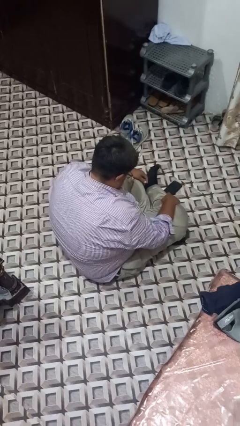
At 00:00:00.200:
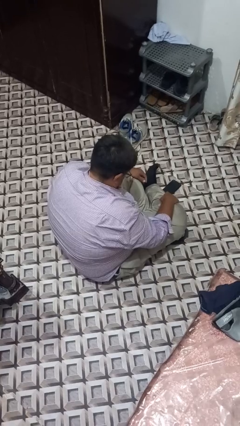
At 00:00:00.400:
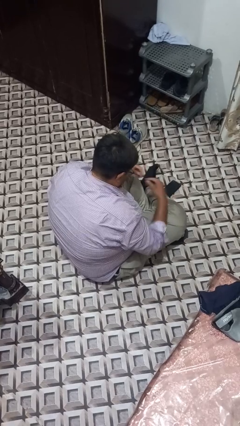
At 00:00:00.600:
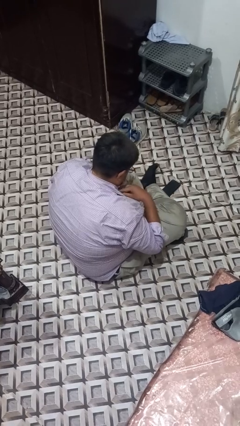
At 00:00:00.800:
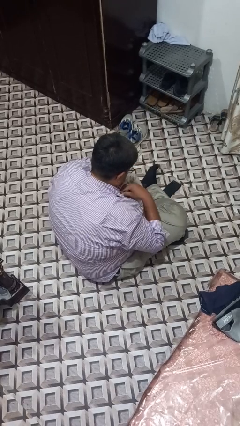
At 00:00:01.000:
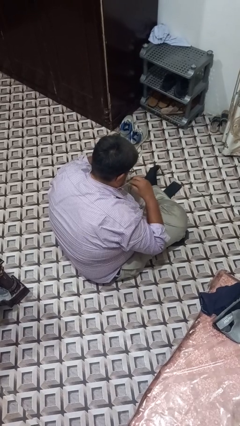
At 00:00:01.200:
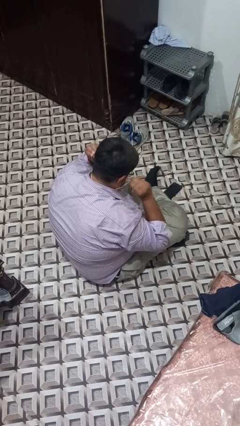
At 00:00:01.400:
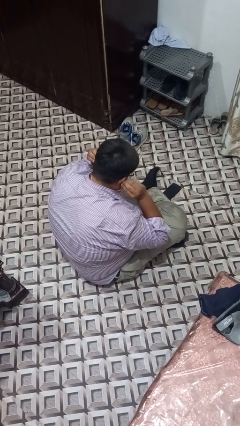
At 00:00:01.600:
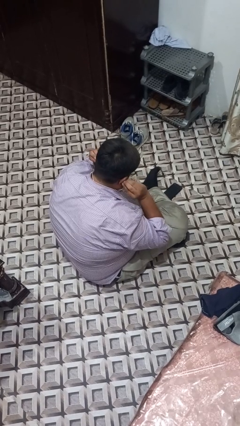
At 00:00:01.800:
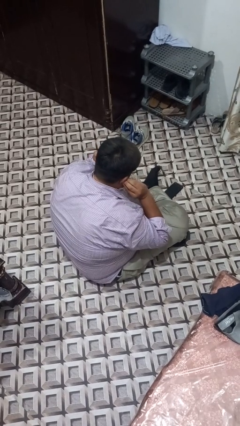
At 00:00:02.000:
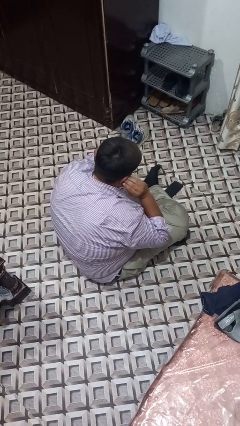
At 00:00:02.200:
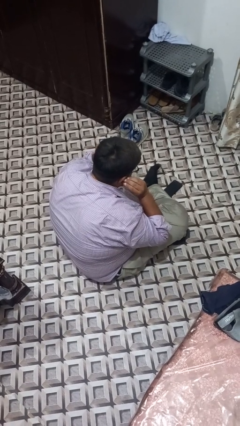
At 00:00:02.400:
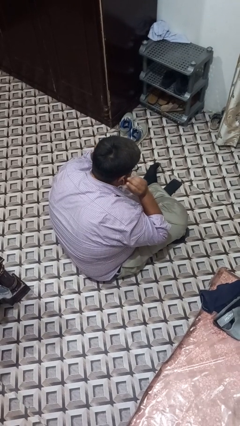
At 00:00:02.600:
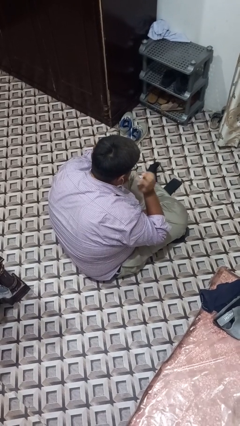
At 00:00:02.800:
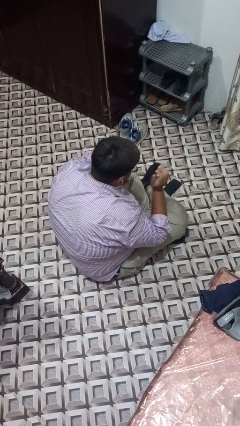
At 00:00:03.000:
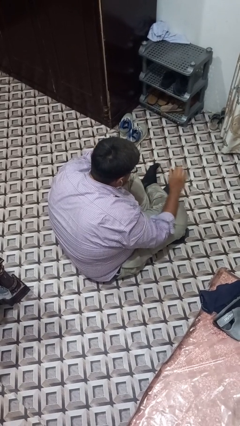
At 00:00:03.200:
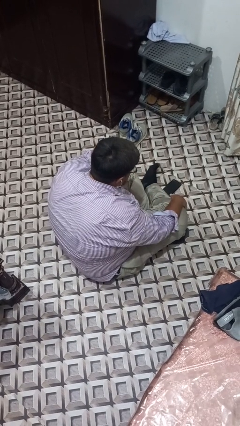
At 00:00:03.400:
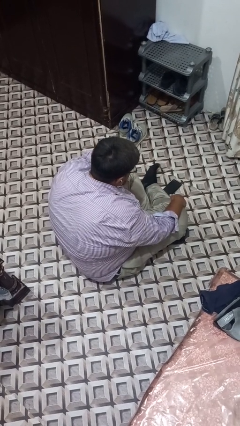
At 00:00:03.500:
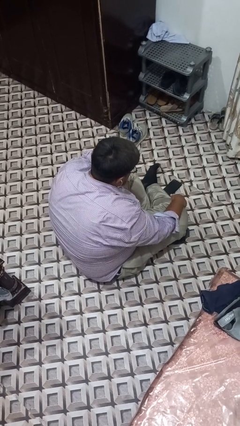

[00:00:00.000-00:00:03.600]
person puts on headphones

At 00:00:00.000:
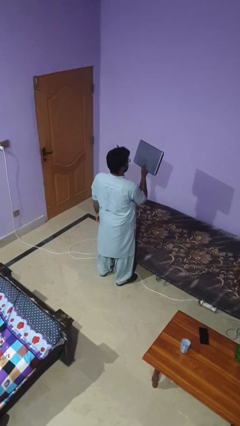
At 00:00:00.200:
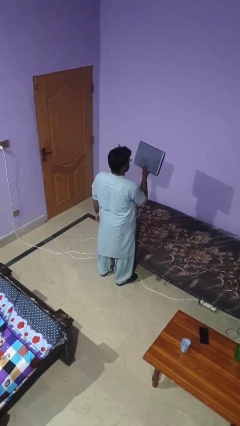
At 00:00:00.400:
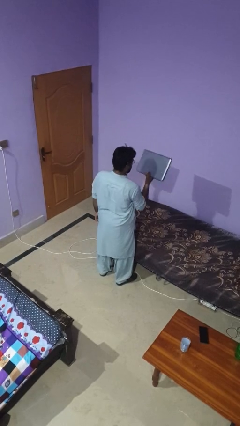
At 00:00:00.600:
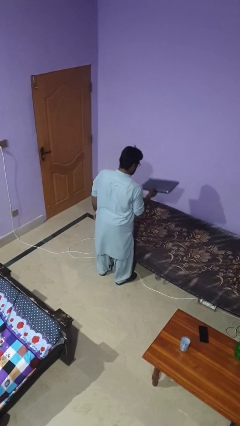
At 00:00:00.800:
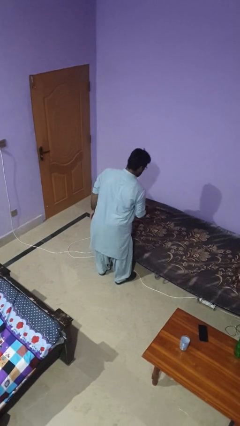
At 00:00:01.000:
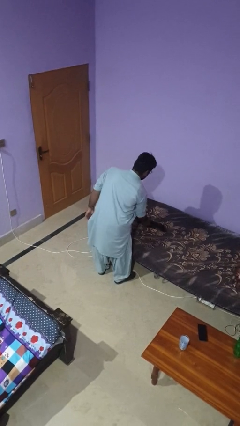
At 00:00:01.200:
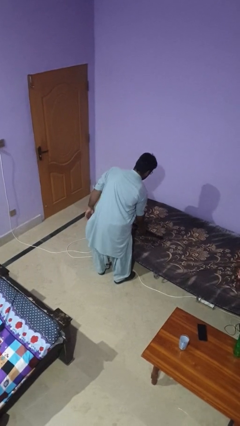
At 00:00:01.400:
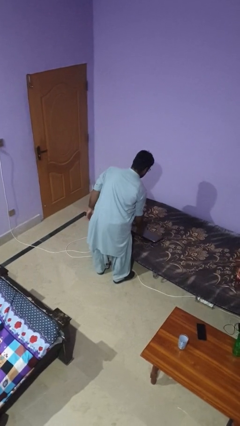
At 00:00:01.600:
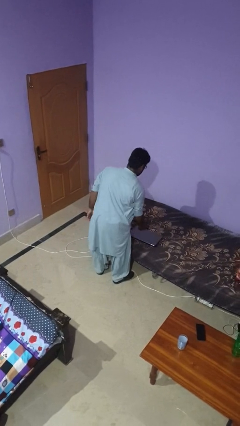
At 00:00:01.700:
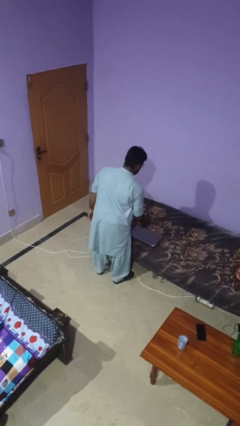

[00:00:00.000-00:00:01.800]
person puts down object on bed

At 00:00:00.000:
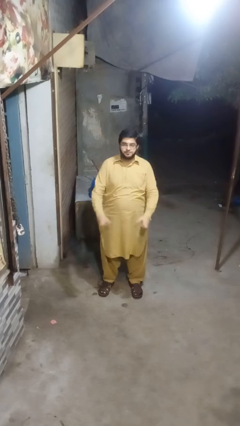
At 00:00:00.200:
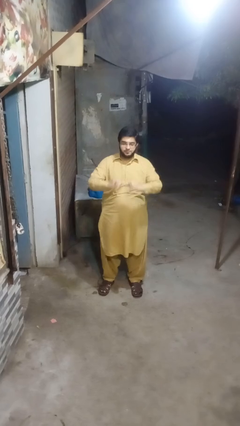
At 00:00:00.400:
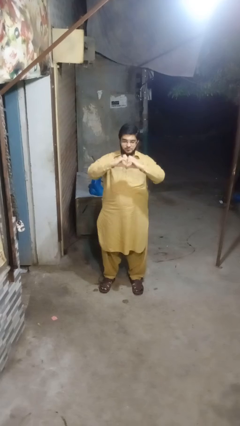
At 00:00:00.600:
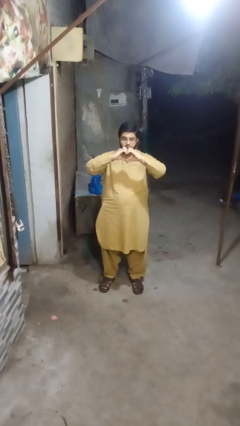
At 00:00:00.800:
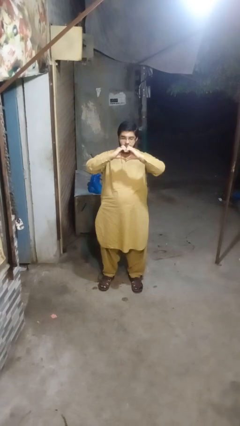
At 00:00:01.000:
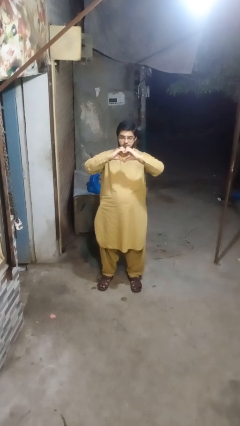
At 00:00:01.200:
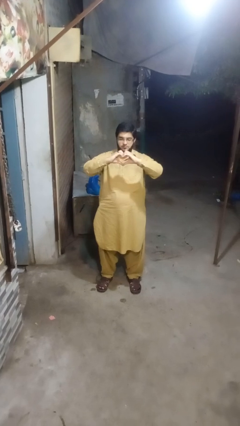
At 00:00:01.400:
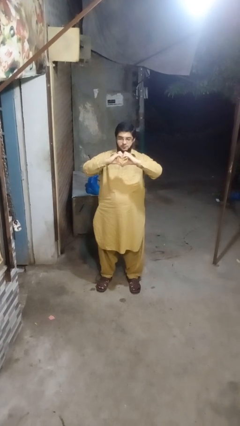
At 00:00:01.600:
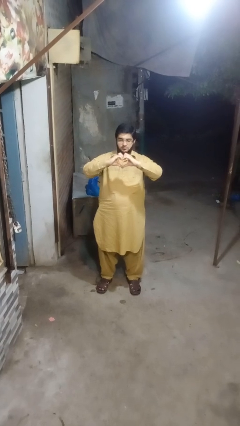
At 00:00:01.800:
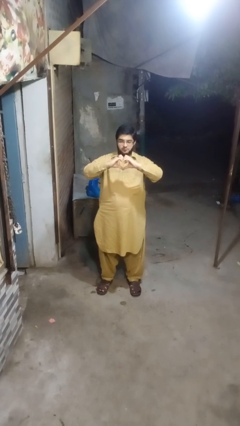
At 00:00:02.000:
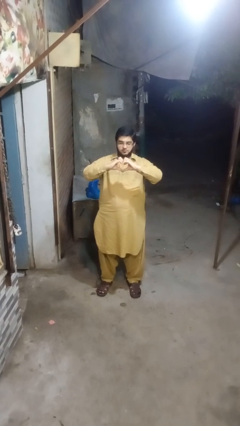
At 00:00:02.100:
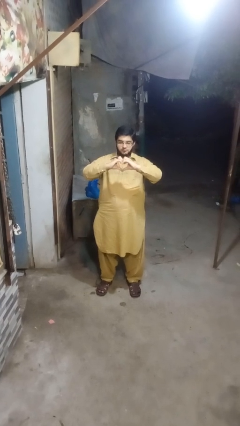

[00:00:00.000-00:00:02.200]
person gestures heart

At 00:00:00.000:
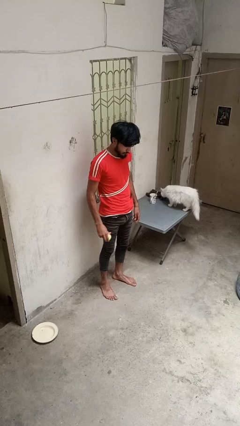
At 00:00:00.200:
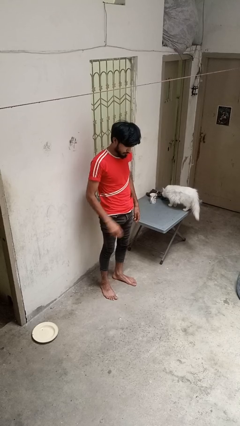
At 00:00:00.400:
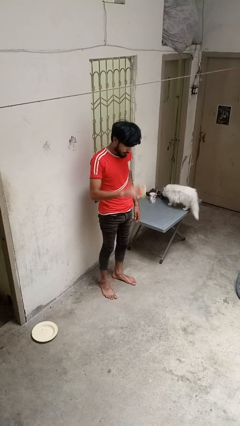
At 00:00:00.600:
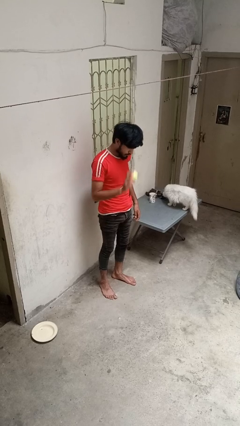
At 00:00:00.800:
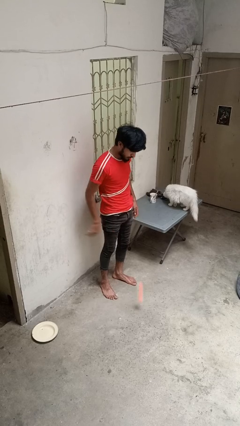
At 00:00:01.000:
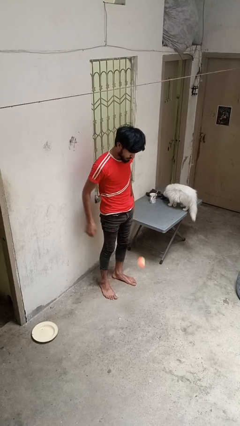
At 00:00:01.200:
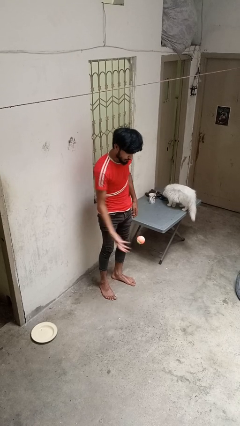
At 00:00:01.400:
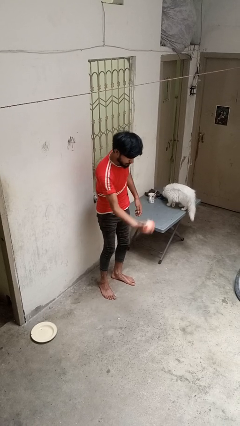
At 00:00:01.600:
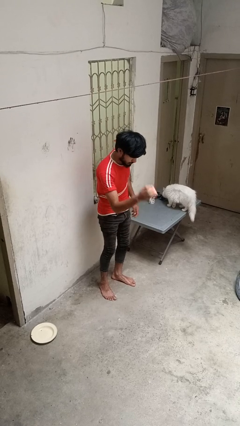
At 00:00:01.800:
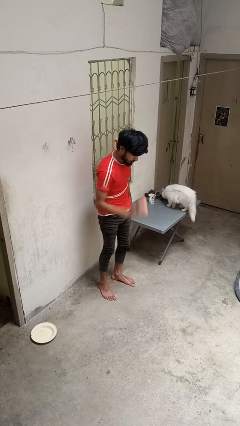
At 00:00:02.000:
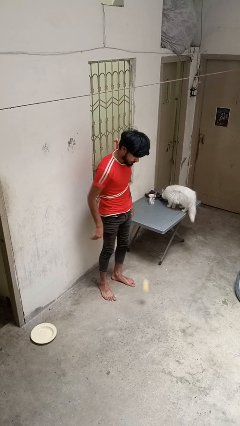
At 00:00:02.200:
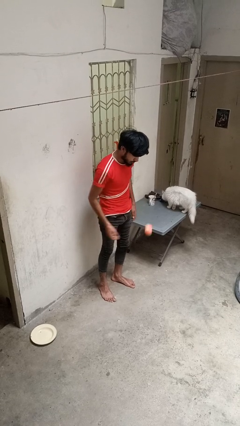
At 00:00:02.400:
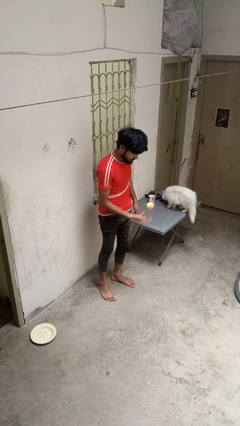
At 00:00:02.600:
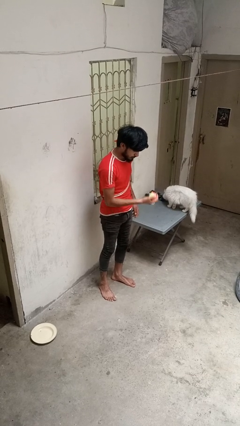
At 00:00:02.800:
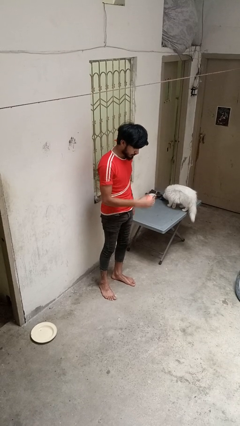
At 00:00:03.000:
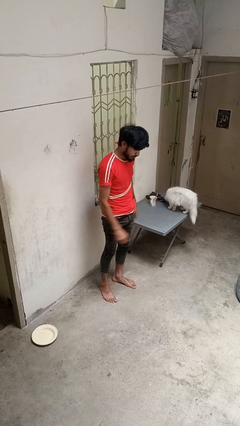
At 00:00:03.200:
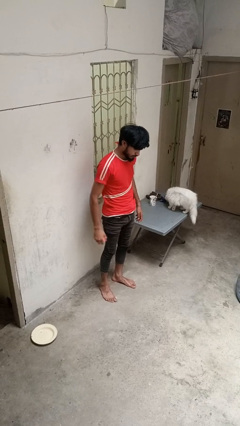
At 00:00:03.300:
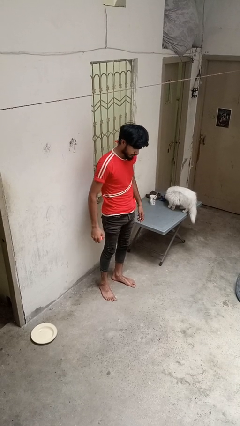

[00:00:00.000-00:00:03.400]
person bounces ball on floor

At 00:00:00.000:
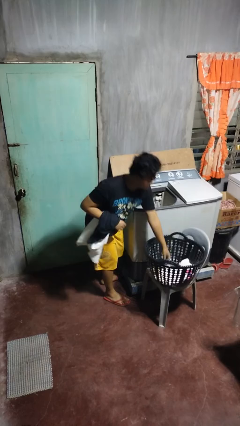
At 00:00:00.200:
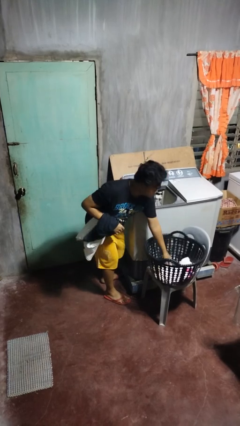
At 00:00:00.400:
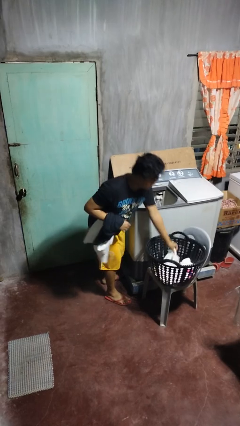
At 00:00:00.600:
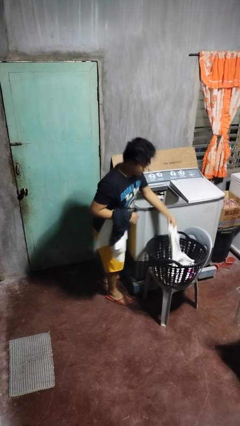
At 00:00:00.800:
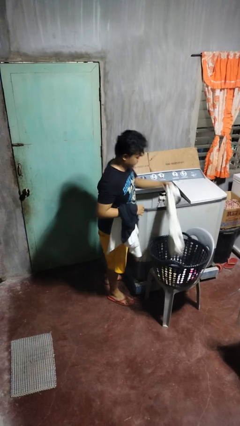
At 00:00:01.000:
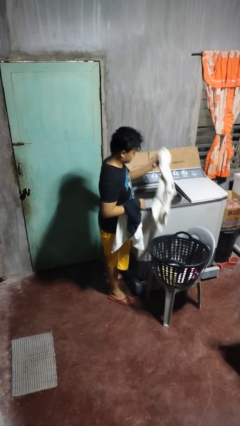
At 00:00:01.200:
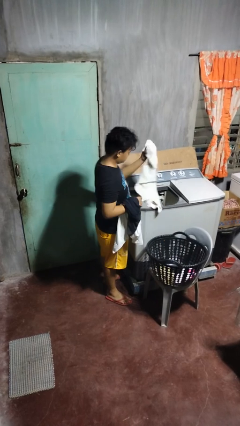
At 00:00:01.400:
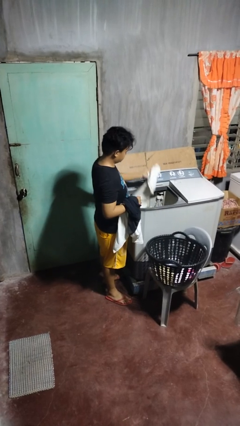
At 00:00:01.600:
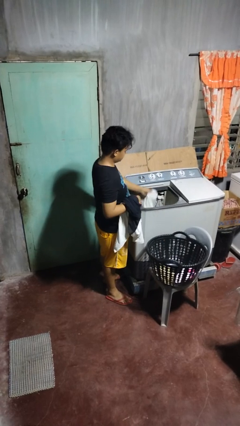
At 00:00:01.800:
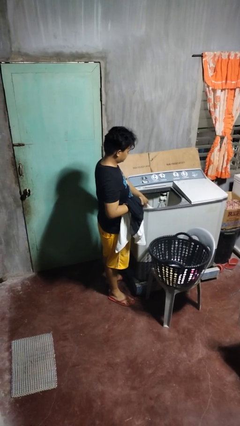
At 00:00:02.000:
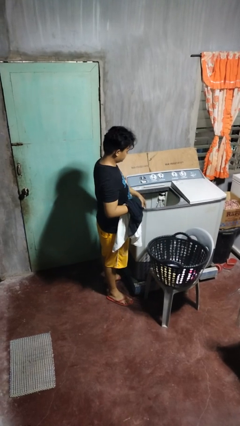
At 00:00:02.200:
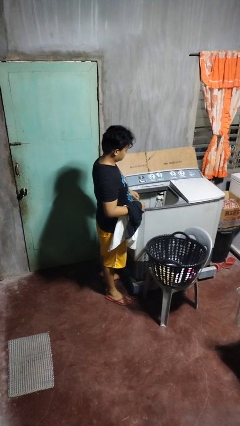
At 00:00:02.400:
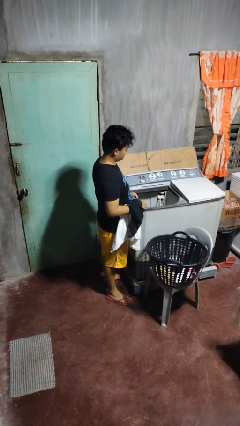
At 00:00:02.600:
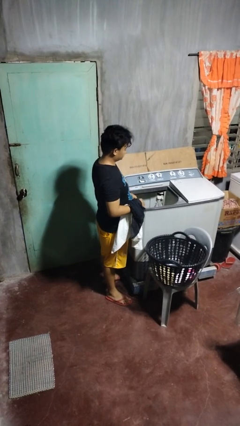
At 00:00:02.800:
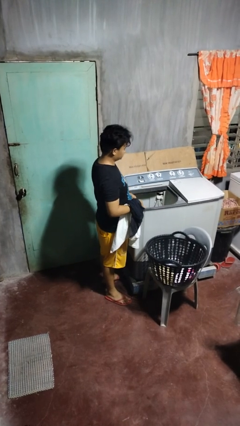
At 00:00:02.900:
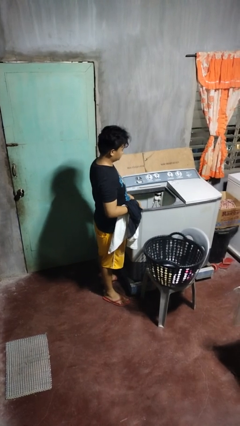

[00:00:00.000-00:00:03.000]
person loads clotheswasher

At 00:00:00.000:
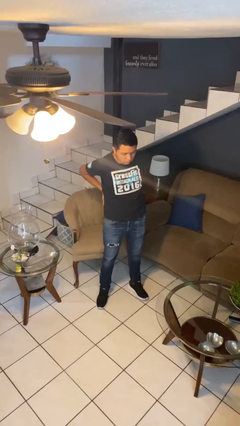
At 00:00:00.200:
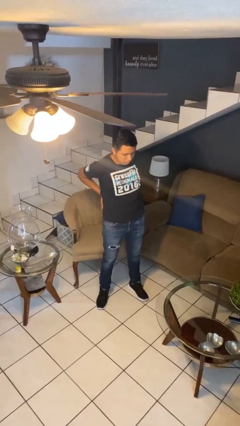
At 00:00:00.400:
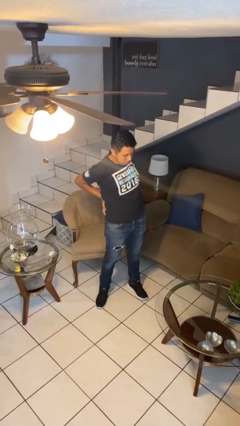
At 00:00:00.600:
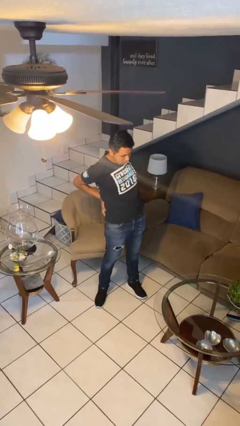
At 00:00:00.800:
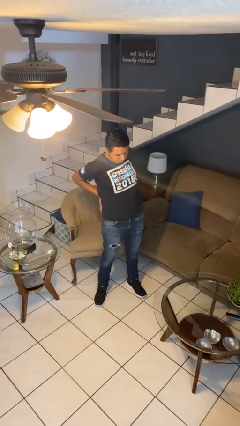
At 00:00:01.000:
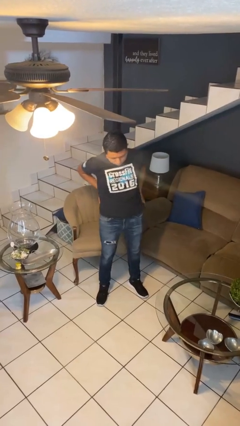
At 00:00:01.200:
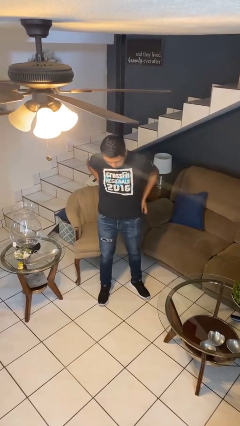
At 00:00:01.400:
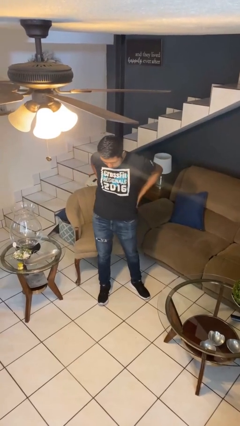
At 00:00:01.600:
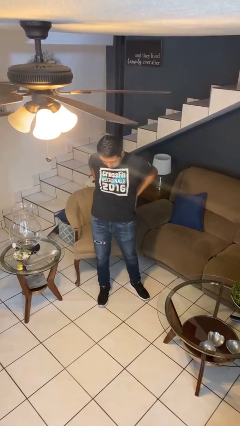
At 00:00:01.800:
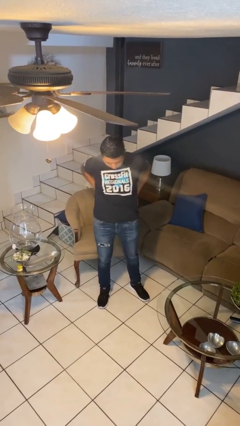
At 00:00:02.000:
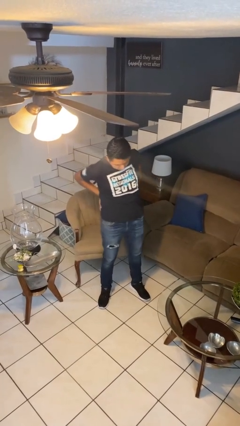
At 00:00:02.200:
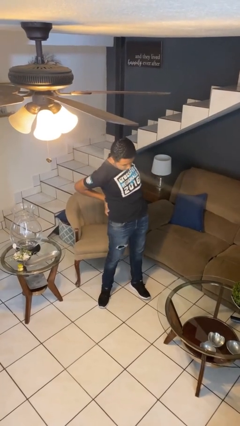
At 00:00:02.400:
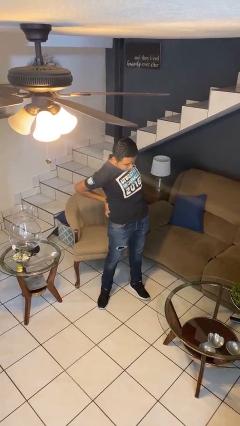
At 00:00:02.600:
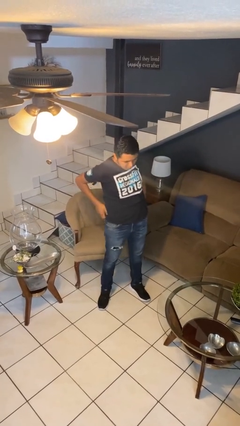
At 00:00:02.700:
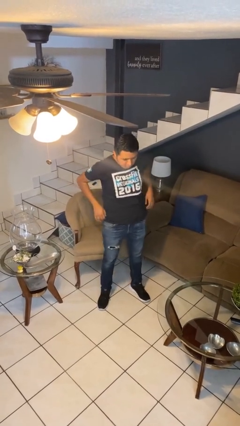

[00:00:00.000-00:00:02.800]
person stretches back
